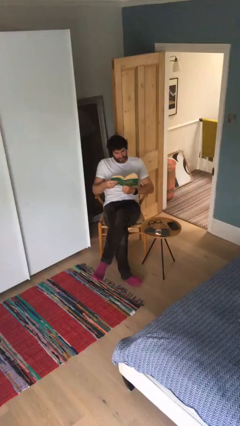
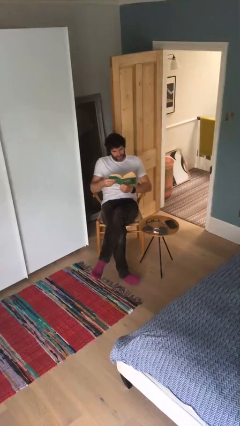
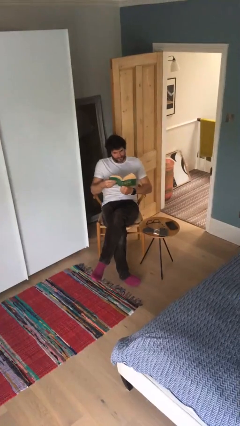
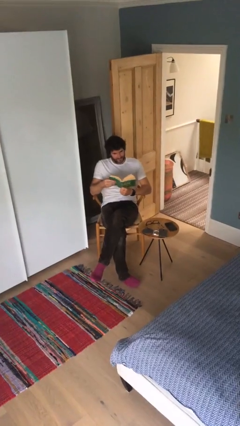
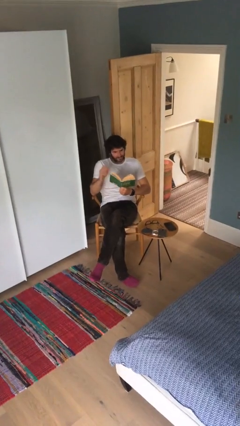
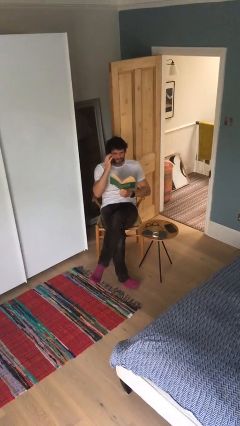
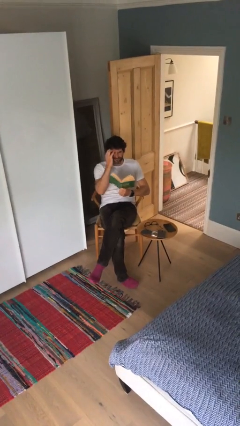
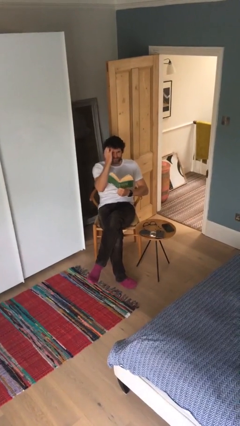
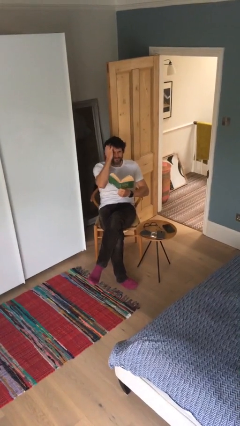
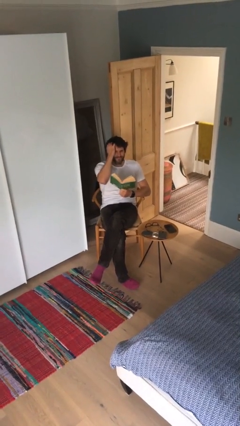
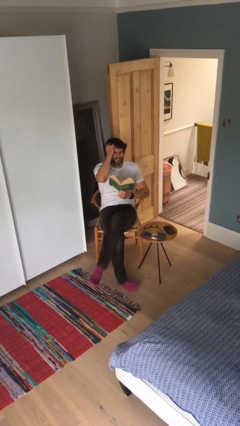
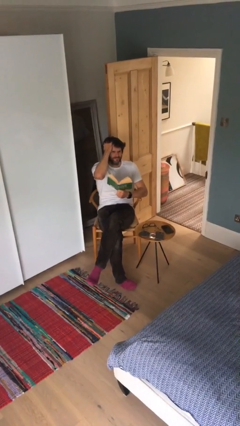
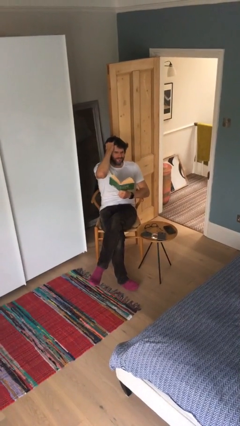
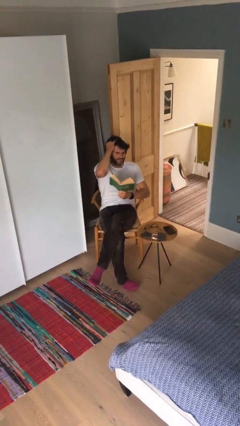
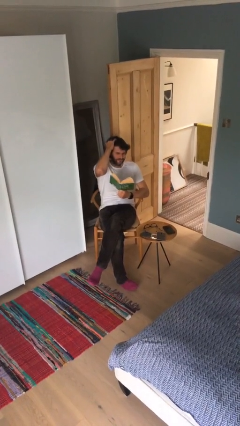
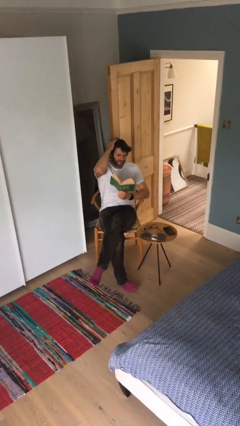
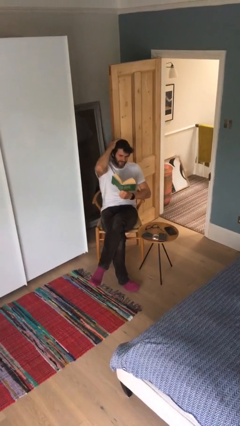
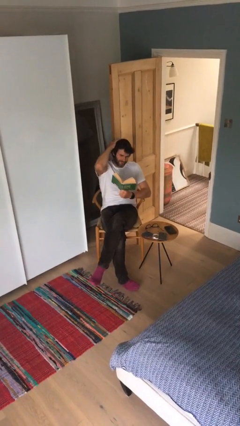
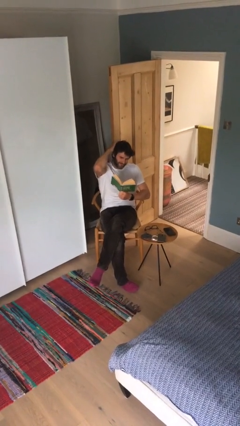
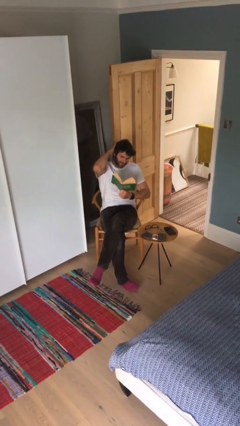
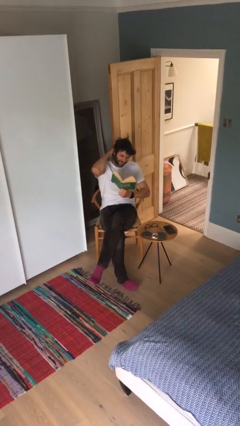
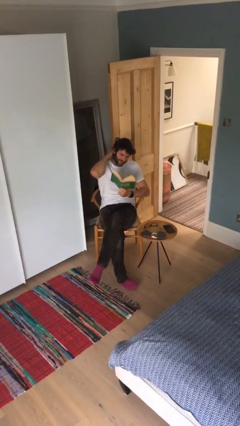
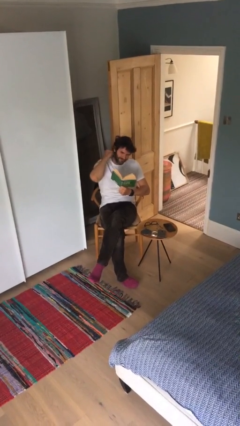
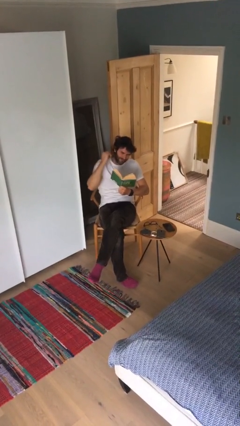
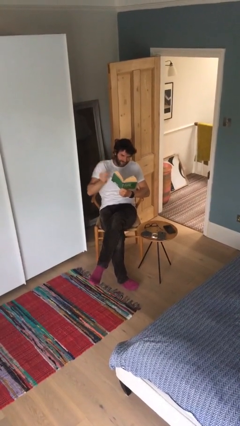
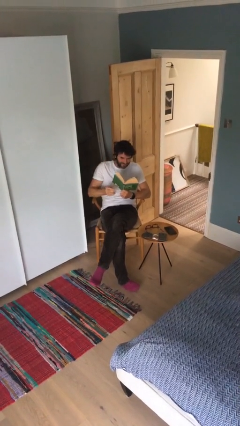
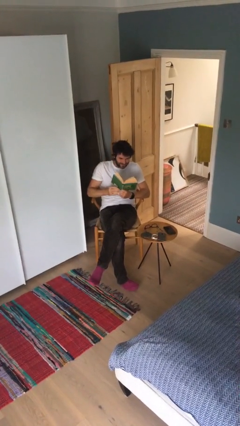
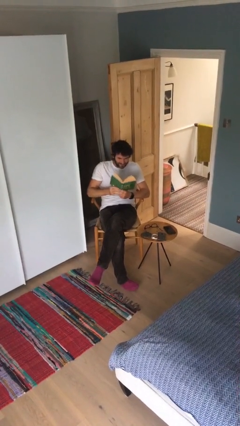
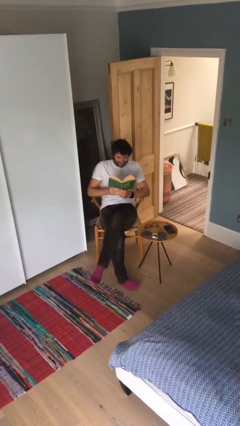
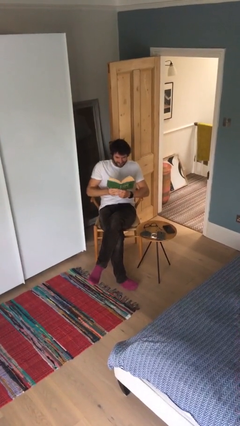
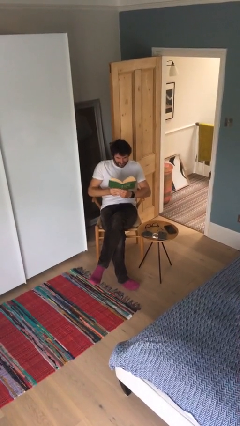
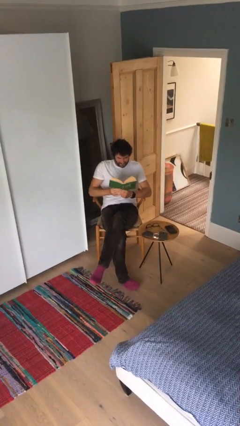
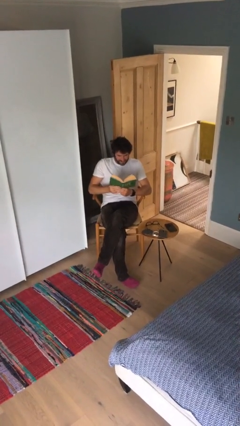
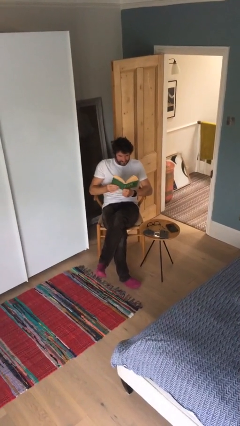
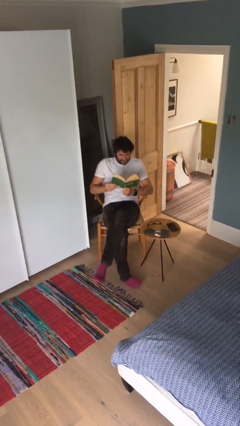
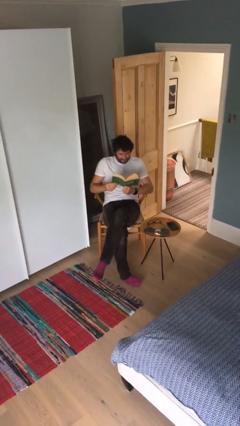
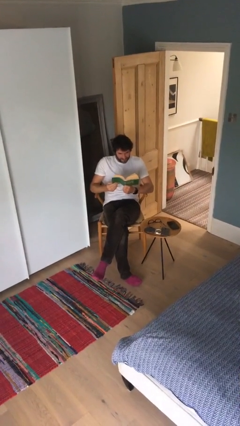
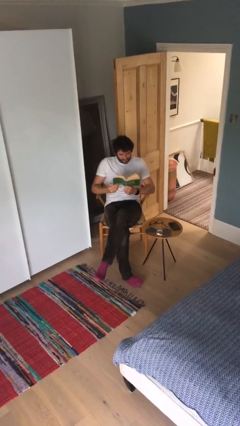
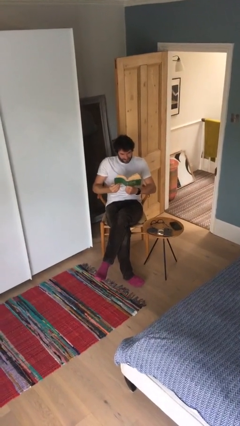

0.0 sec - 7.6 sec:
person reads document

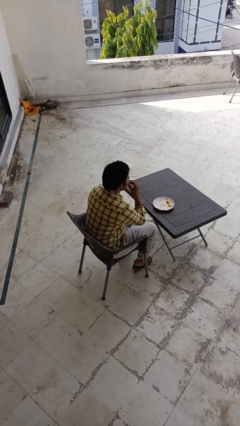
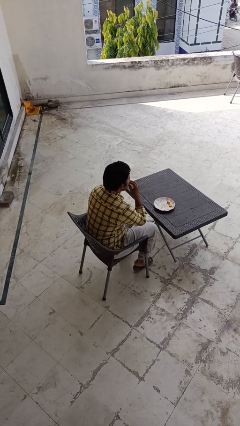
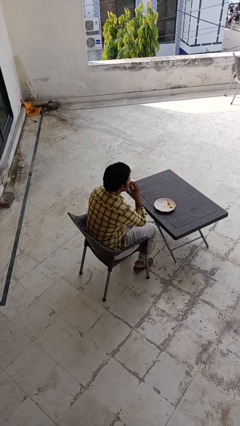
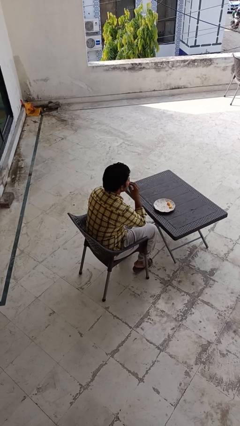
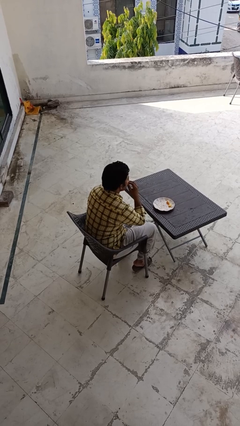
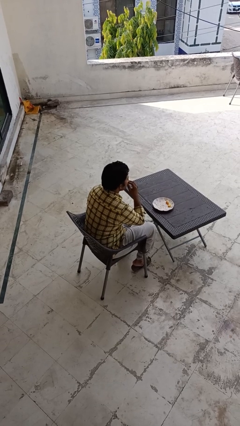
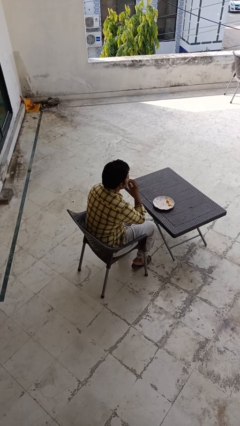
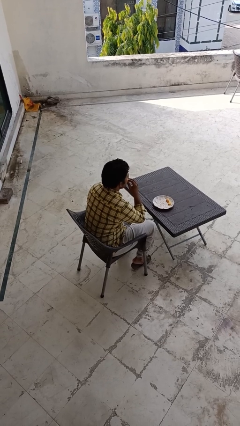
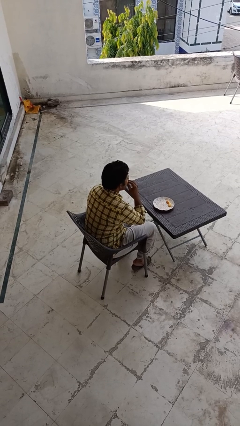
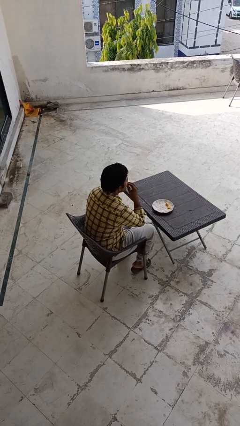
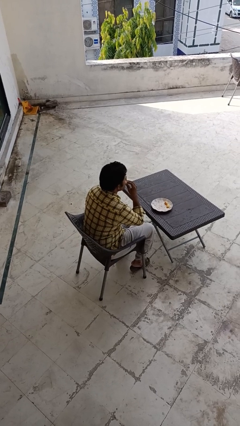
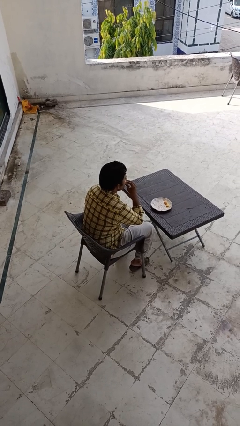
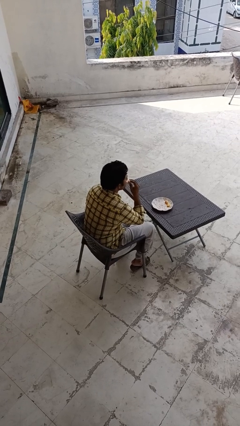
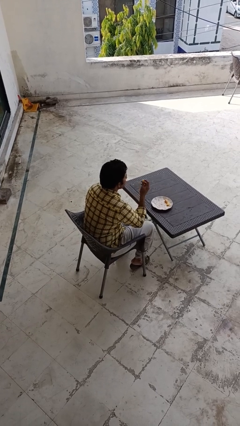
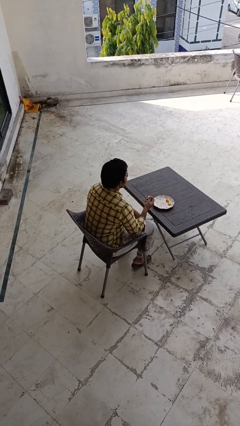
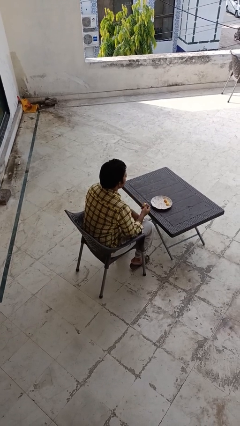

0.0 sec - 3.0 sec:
person eats with hands

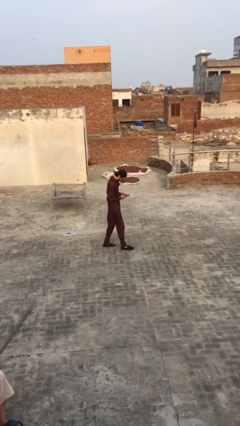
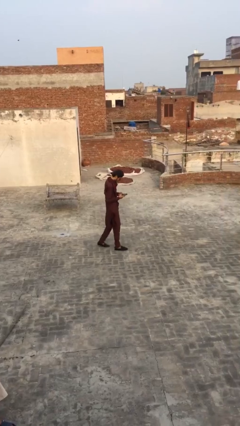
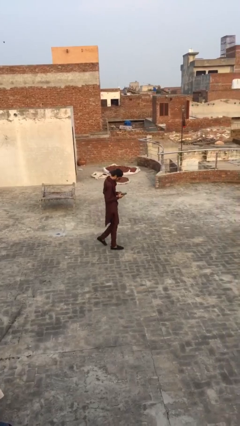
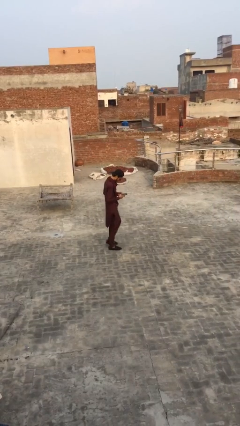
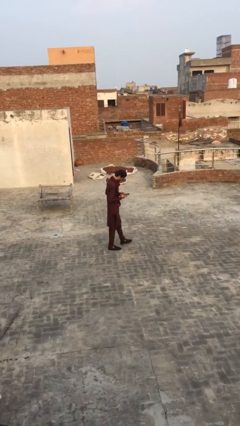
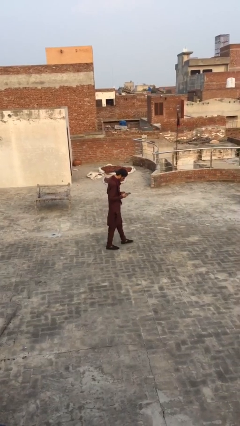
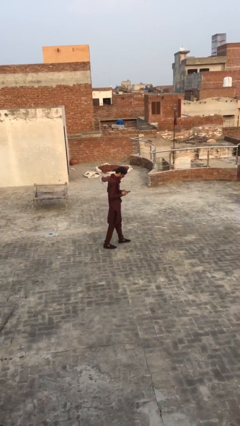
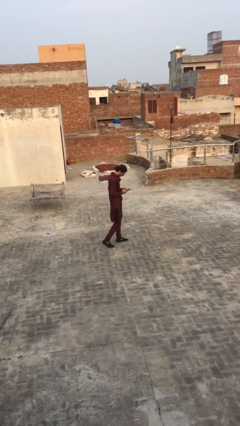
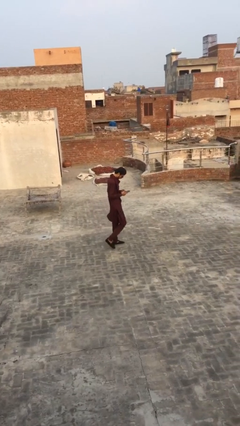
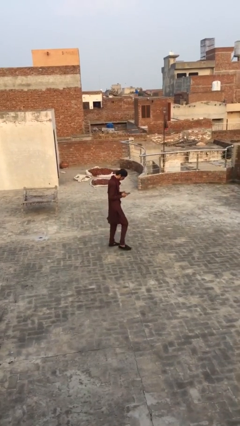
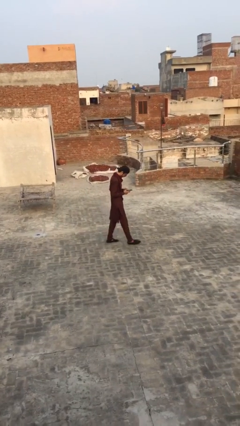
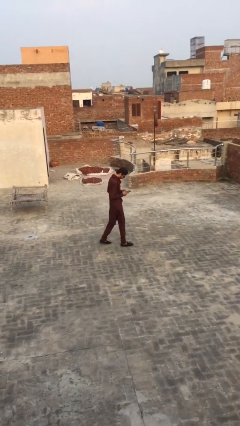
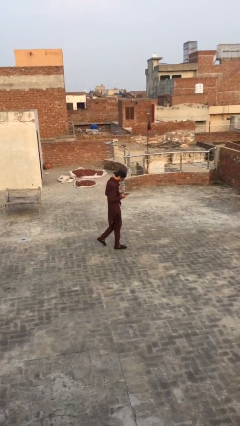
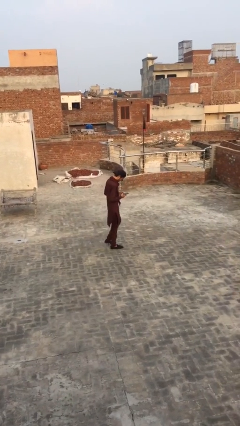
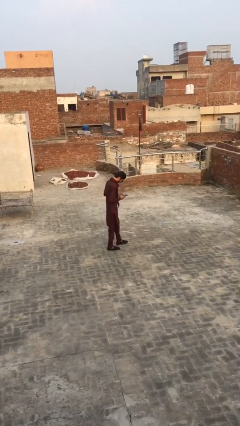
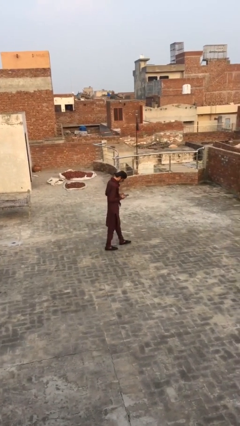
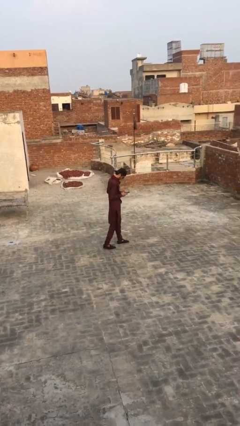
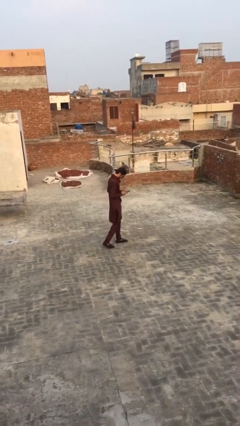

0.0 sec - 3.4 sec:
person texts on phone

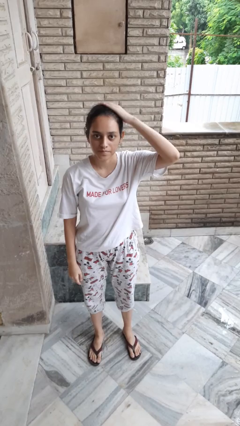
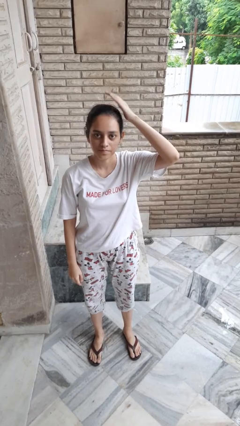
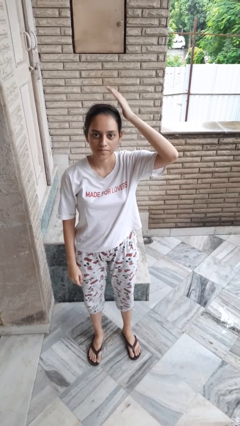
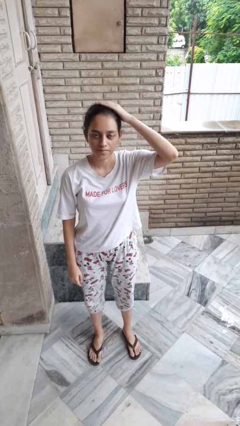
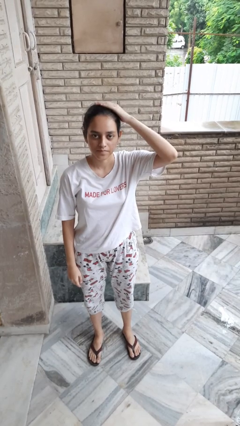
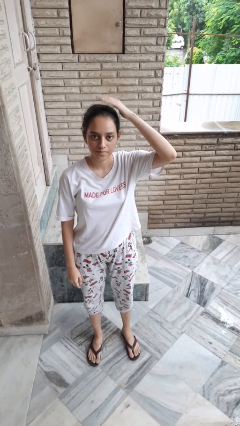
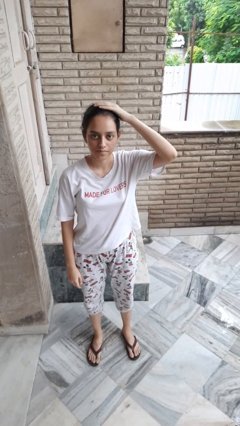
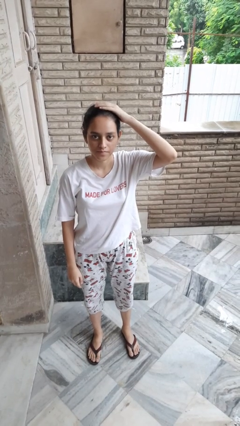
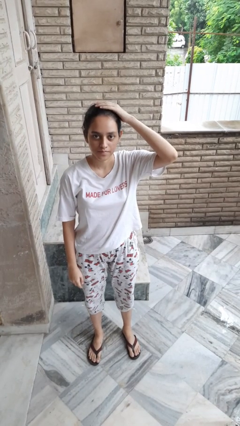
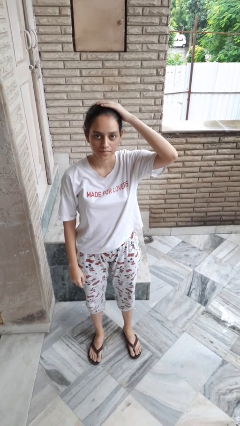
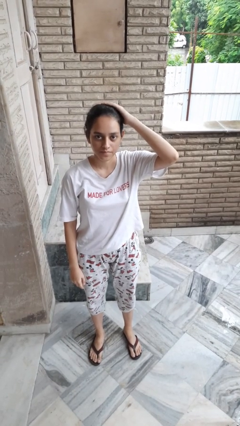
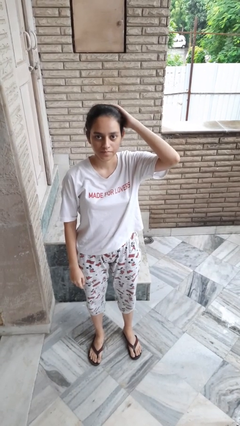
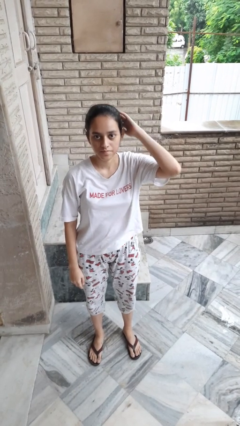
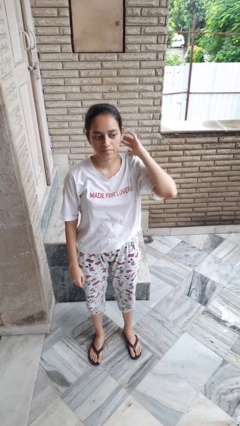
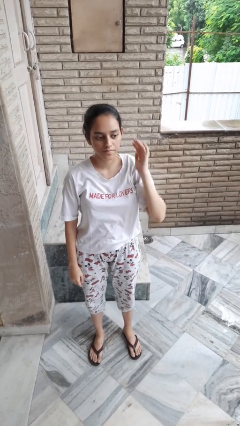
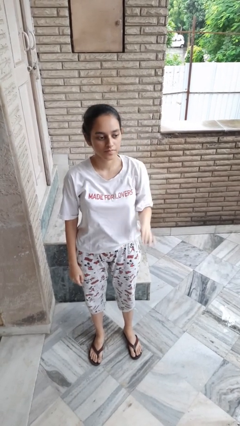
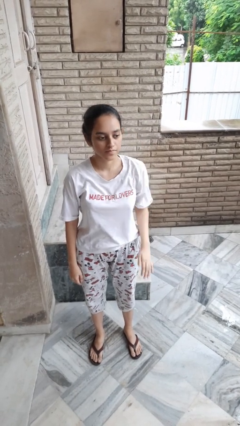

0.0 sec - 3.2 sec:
person pats head

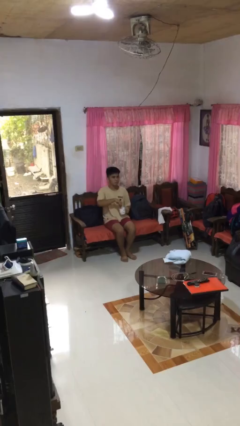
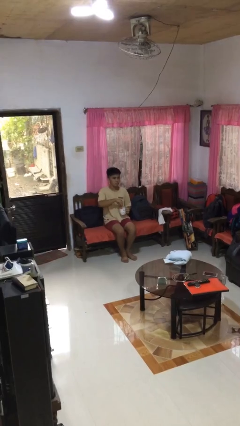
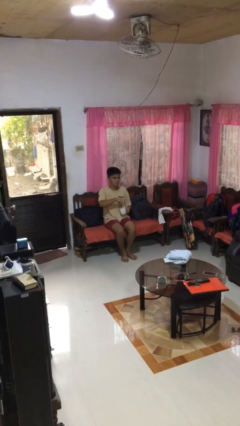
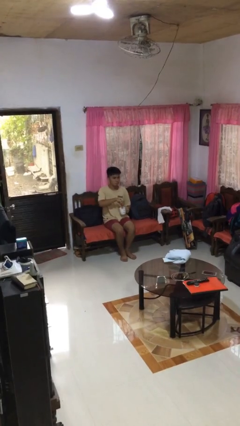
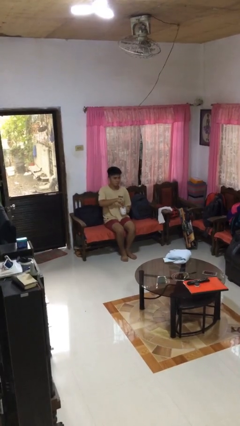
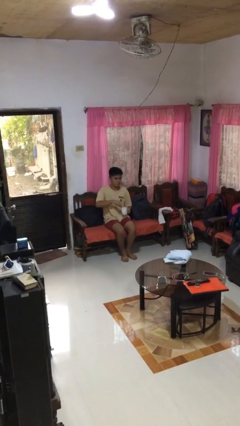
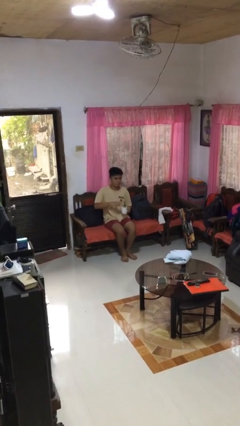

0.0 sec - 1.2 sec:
person stirs mug
